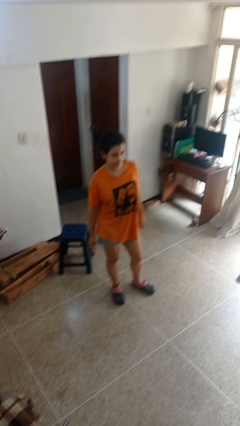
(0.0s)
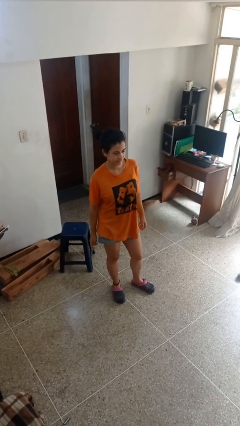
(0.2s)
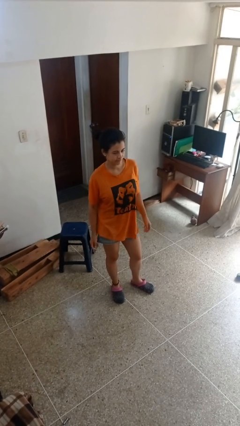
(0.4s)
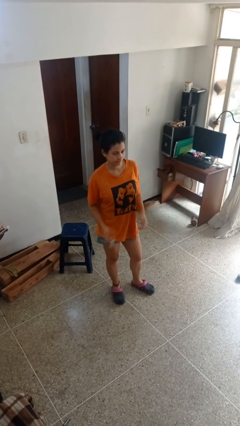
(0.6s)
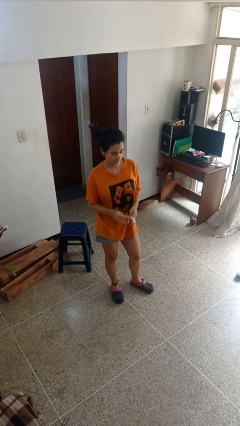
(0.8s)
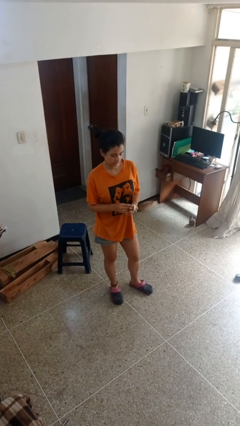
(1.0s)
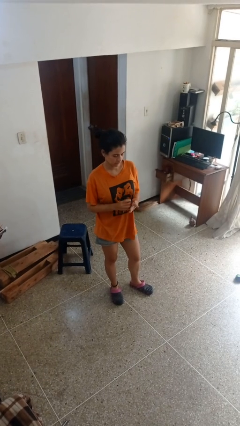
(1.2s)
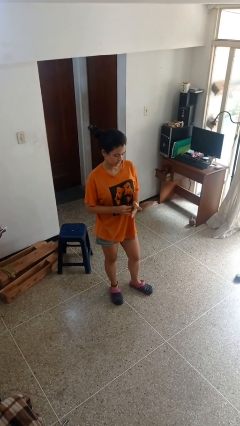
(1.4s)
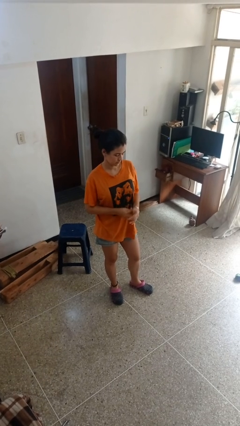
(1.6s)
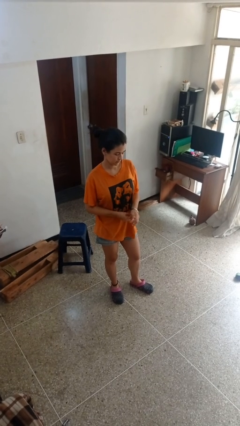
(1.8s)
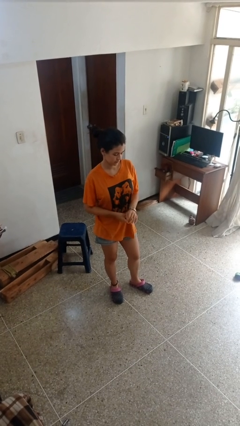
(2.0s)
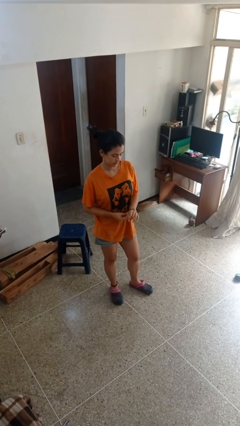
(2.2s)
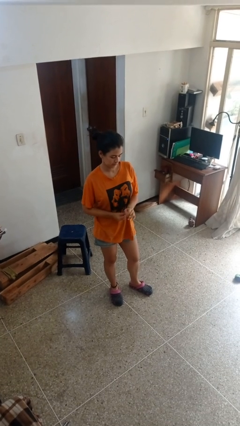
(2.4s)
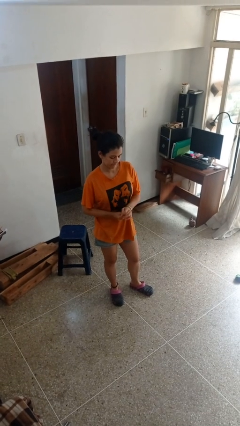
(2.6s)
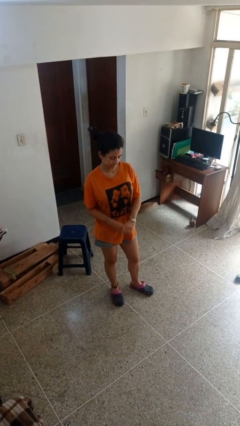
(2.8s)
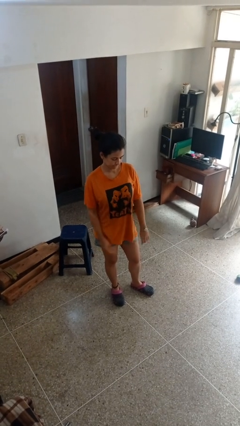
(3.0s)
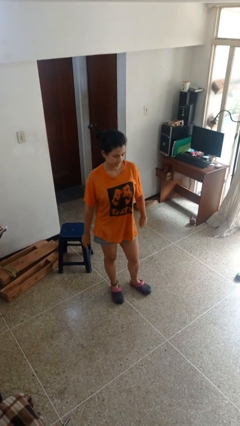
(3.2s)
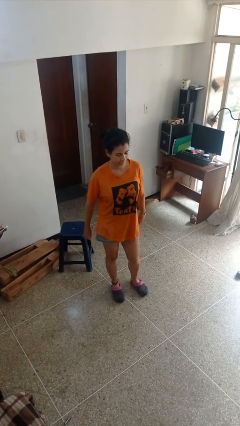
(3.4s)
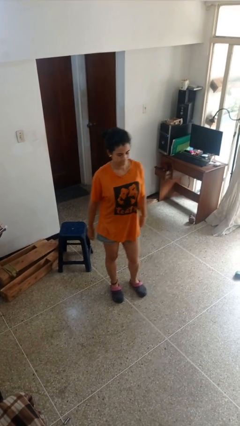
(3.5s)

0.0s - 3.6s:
person puts on wristwatch

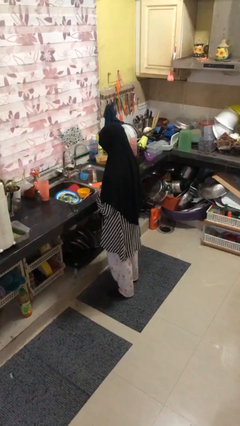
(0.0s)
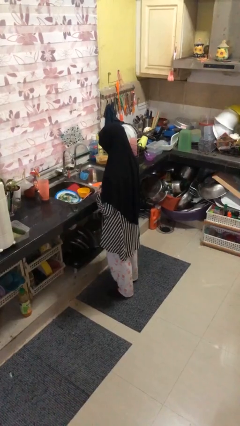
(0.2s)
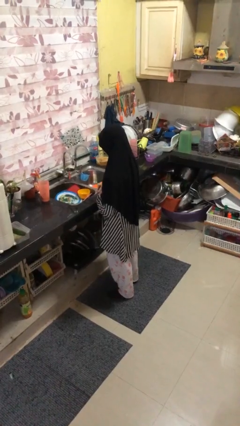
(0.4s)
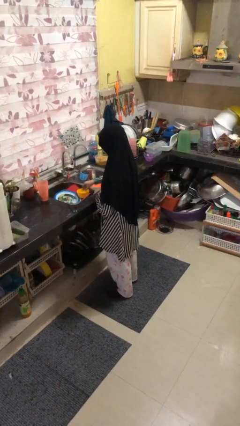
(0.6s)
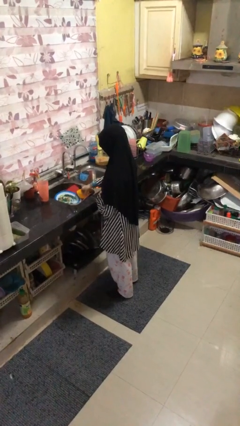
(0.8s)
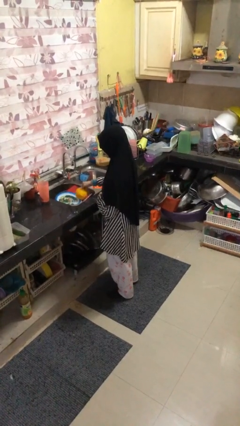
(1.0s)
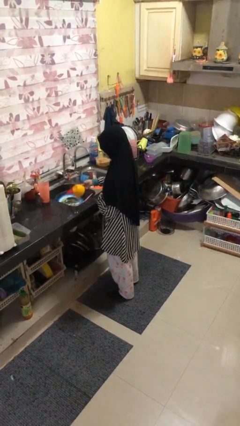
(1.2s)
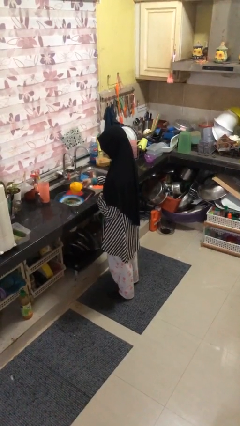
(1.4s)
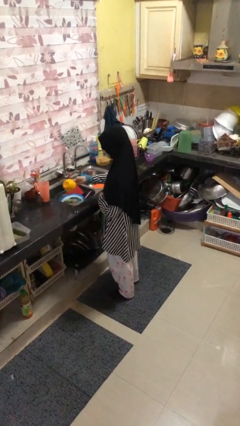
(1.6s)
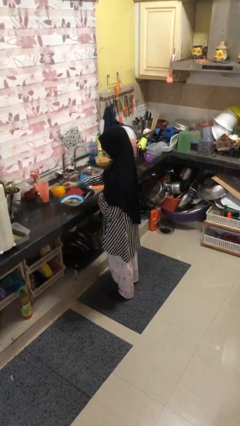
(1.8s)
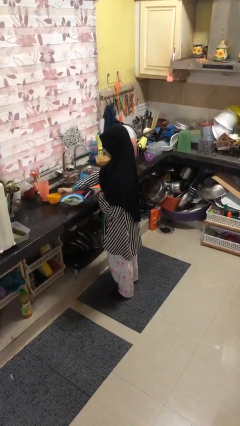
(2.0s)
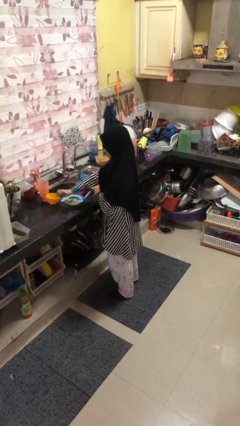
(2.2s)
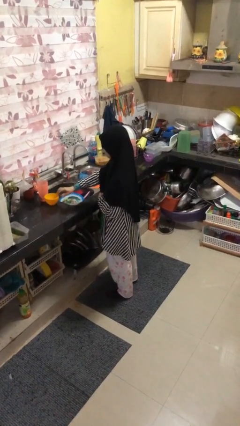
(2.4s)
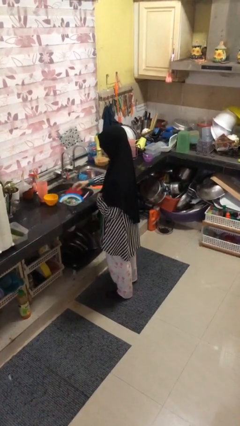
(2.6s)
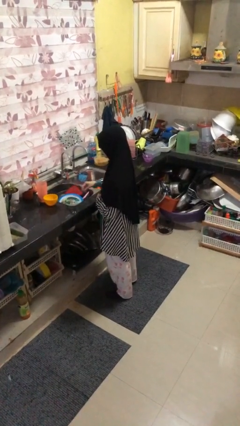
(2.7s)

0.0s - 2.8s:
person unloads dishwasher

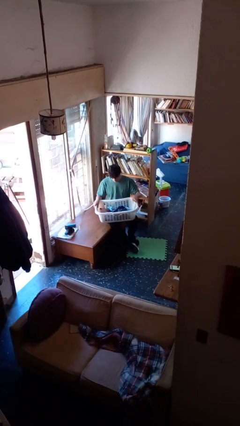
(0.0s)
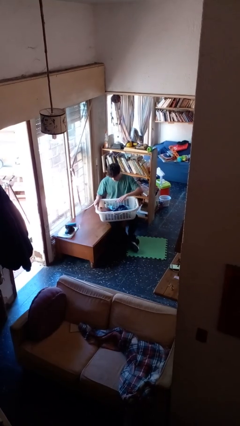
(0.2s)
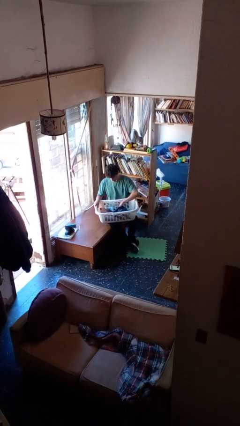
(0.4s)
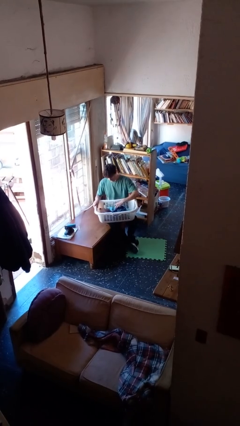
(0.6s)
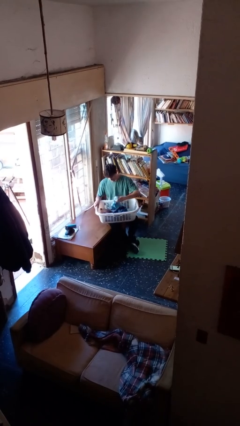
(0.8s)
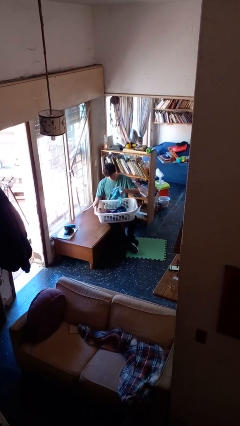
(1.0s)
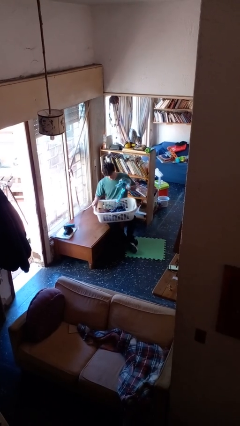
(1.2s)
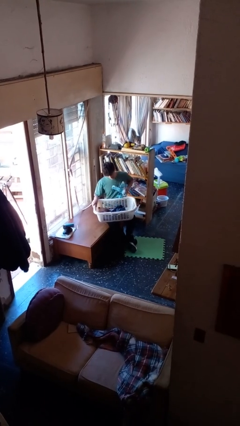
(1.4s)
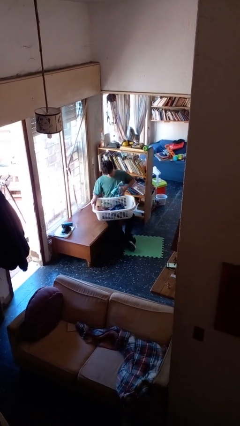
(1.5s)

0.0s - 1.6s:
person takes object from basket

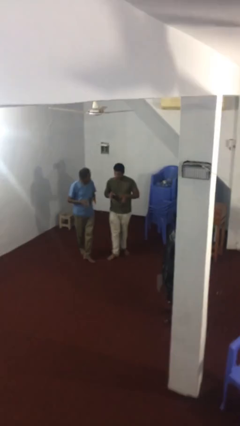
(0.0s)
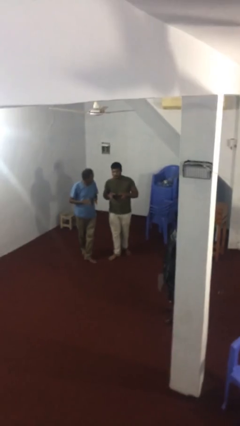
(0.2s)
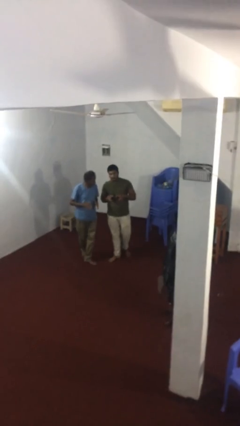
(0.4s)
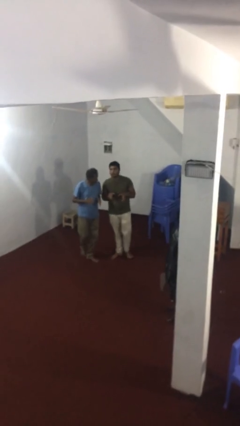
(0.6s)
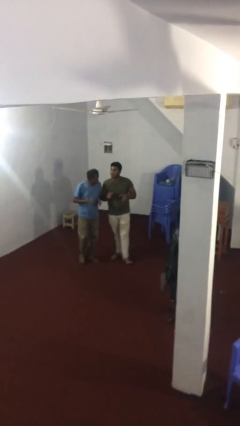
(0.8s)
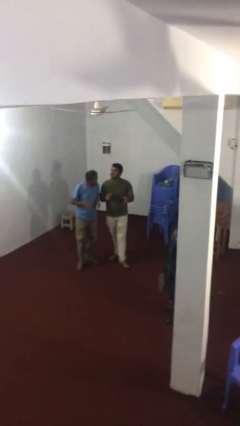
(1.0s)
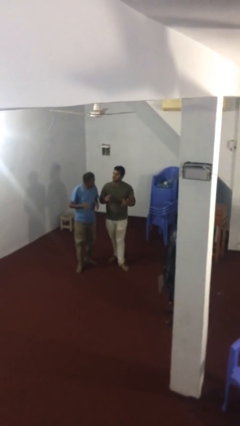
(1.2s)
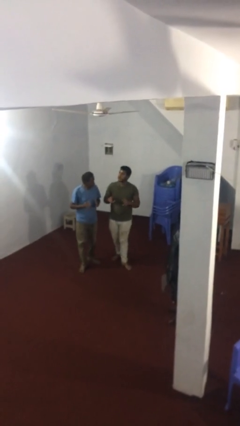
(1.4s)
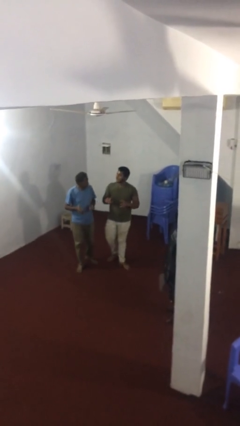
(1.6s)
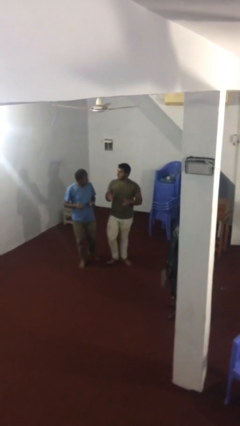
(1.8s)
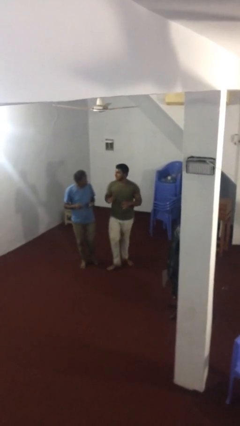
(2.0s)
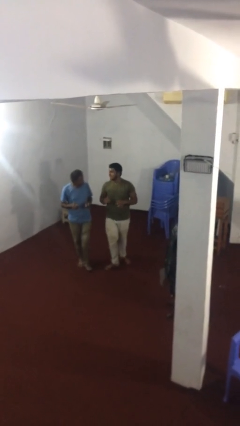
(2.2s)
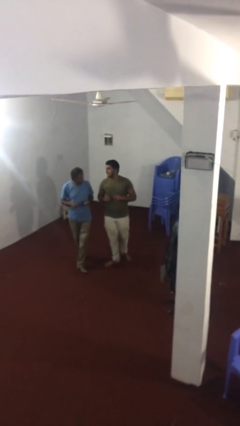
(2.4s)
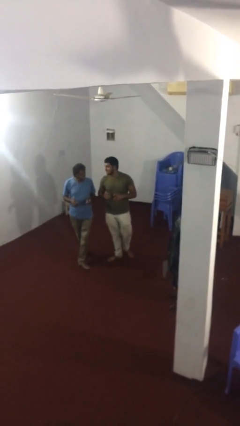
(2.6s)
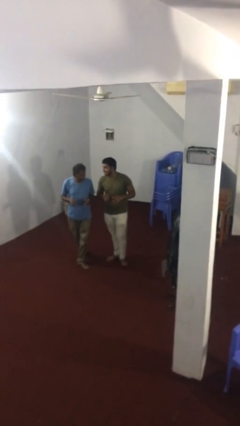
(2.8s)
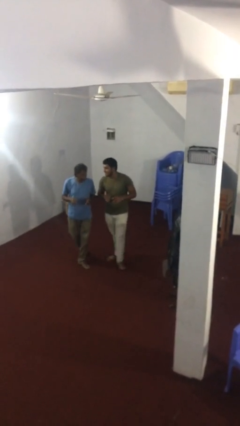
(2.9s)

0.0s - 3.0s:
person talks to person

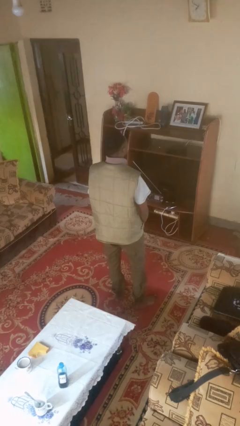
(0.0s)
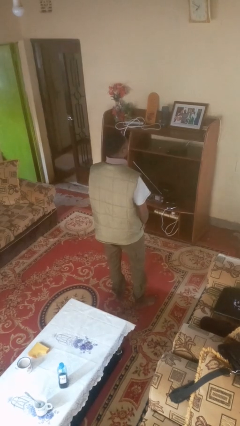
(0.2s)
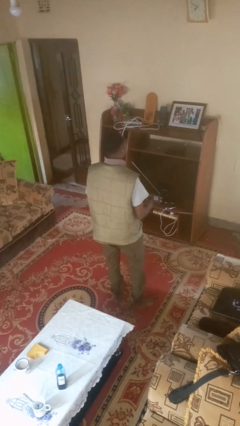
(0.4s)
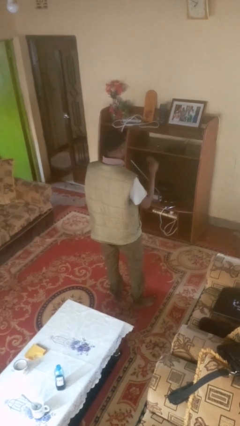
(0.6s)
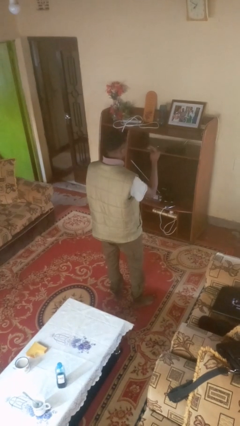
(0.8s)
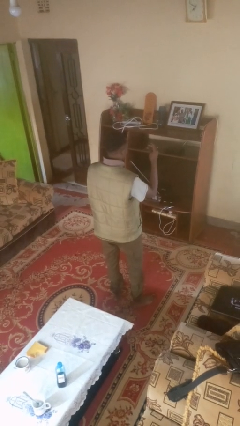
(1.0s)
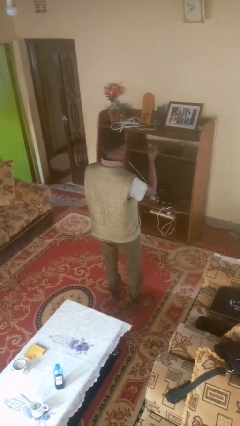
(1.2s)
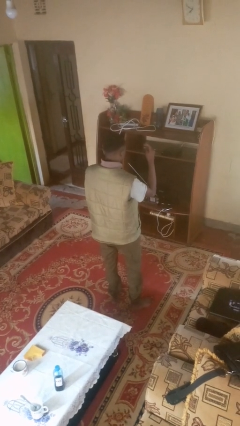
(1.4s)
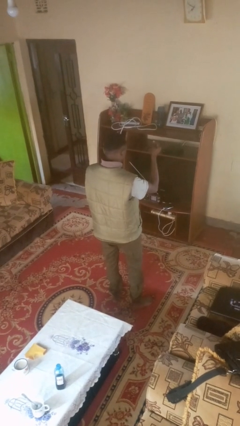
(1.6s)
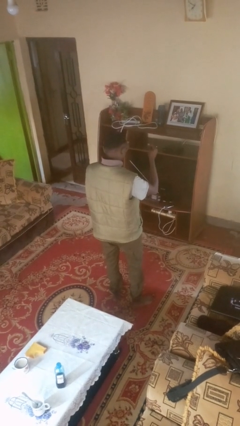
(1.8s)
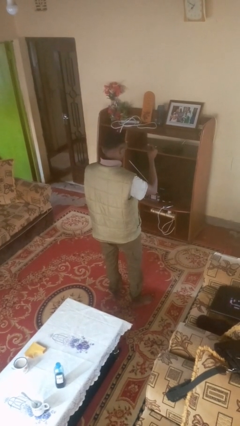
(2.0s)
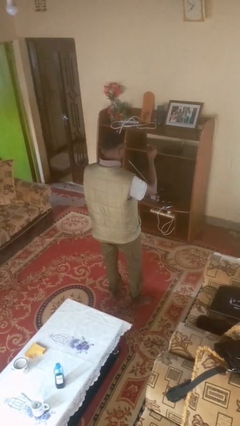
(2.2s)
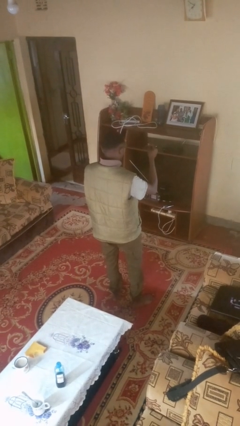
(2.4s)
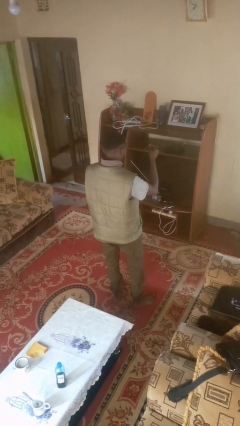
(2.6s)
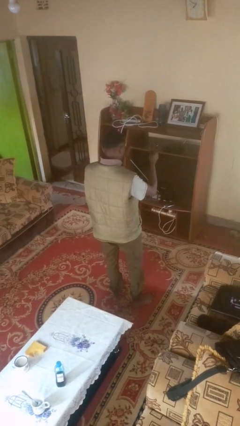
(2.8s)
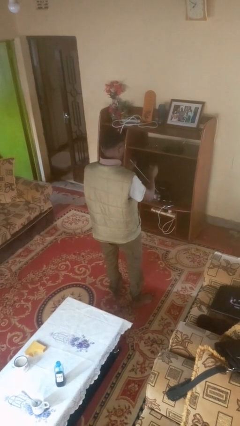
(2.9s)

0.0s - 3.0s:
person snaps fingers

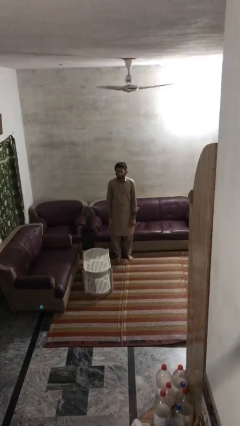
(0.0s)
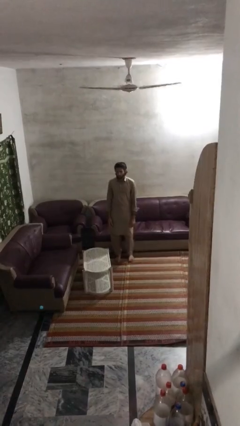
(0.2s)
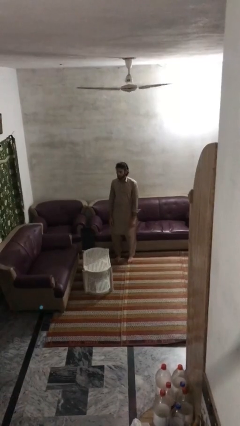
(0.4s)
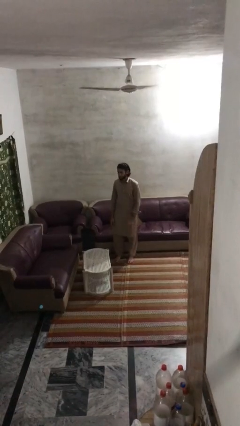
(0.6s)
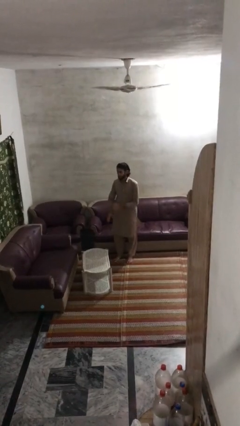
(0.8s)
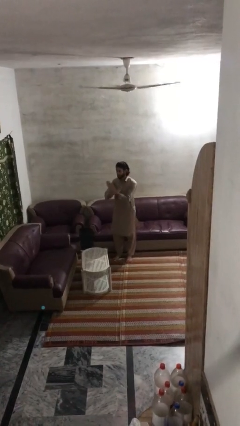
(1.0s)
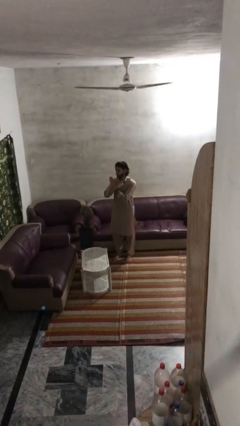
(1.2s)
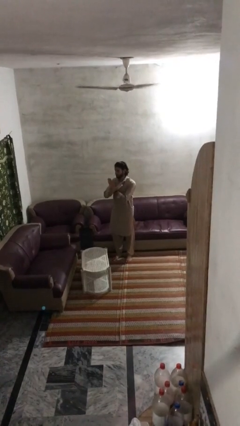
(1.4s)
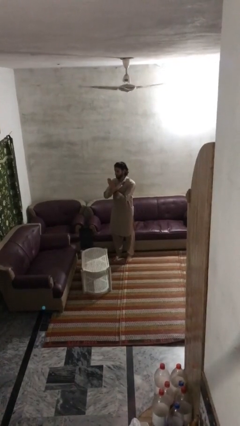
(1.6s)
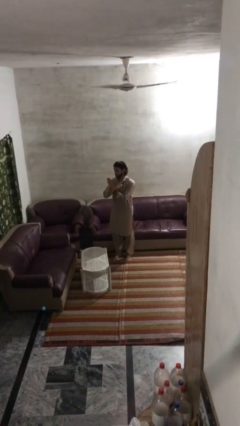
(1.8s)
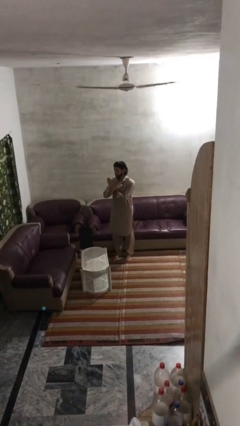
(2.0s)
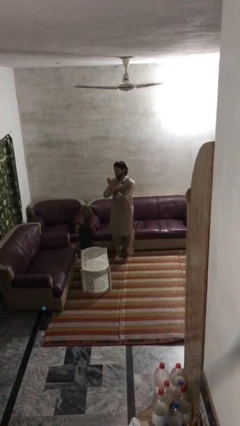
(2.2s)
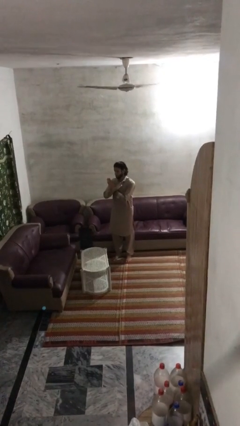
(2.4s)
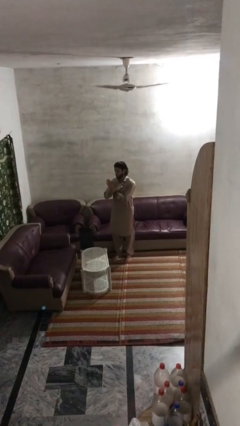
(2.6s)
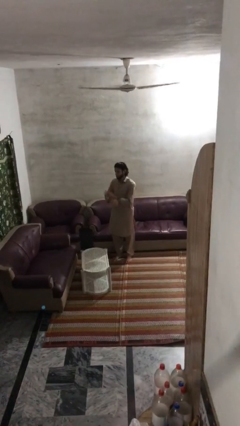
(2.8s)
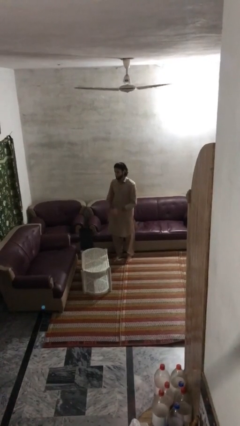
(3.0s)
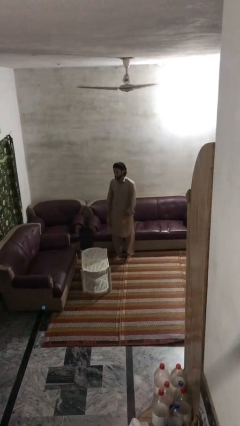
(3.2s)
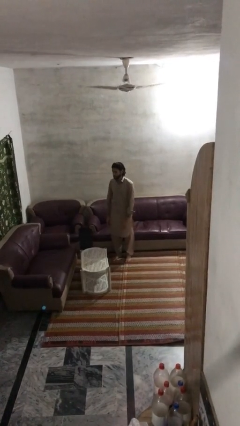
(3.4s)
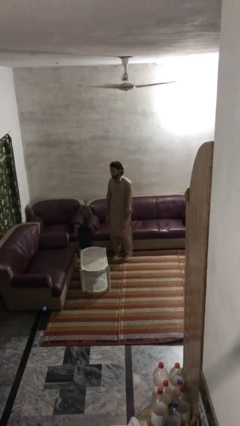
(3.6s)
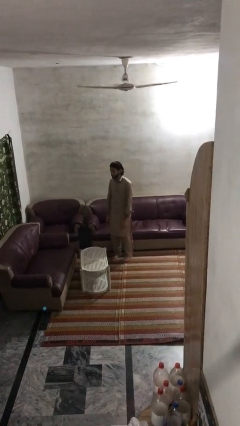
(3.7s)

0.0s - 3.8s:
person gestures arms x

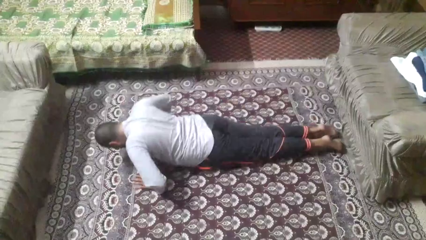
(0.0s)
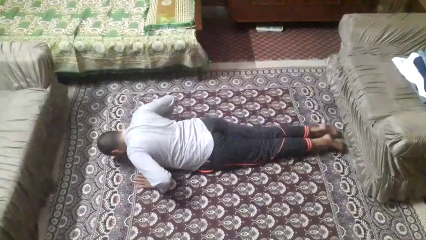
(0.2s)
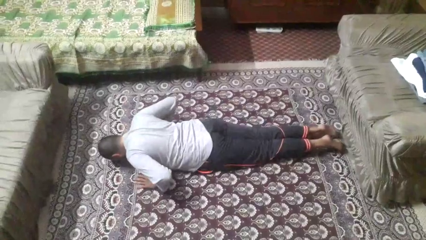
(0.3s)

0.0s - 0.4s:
person exercises with pushup
